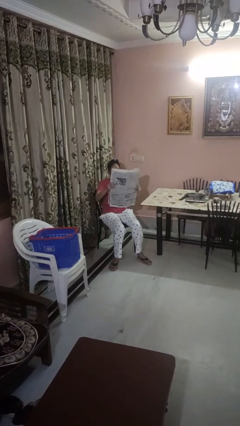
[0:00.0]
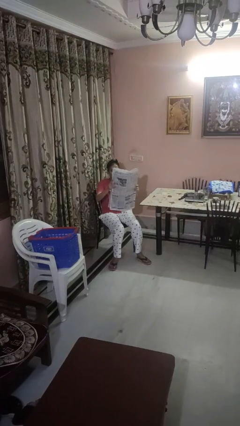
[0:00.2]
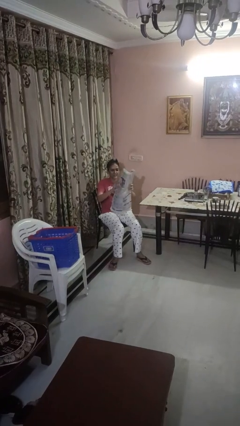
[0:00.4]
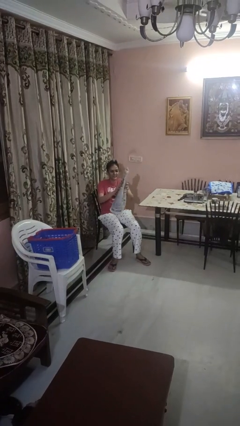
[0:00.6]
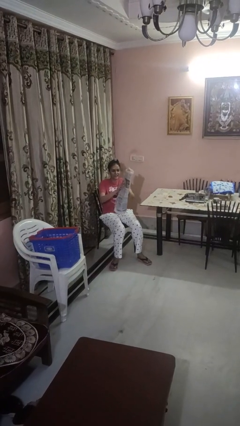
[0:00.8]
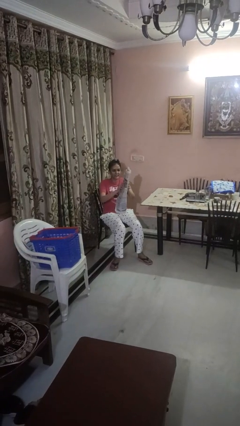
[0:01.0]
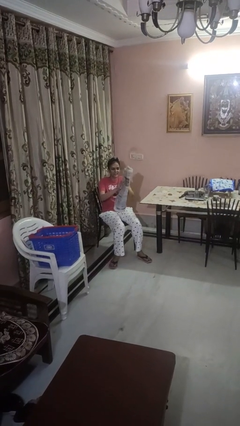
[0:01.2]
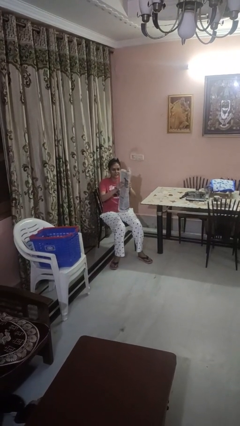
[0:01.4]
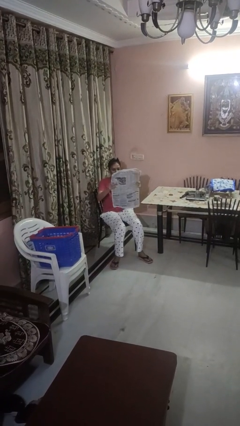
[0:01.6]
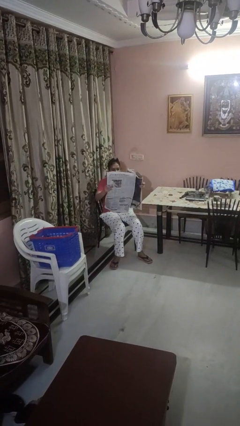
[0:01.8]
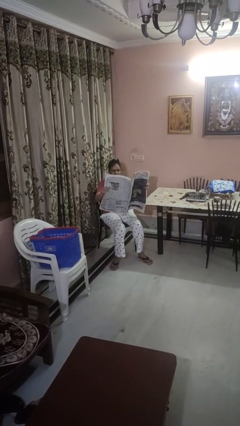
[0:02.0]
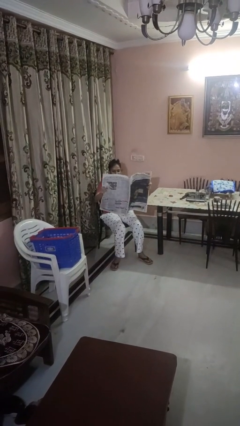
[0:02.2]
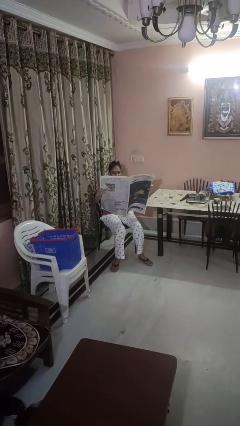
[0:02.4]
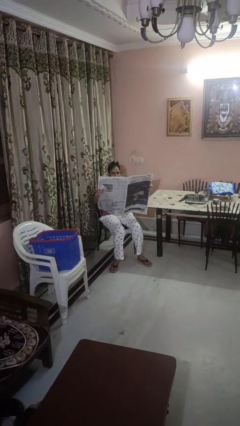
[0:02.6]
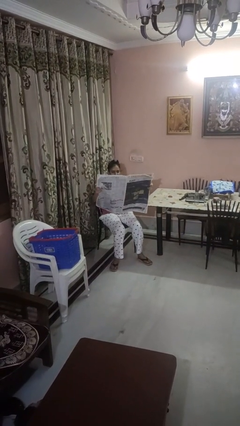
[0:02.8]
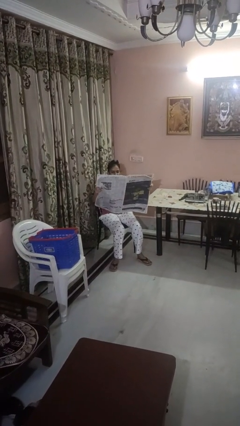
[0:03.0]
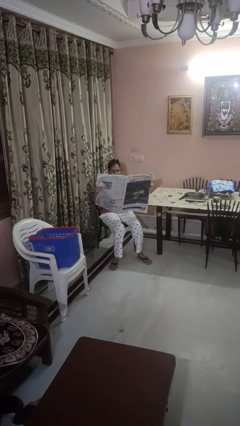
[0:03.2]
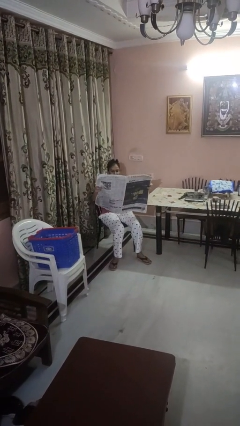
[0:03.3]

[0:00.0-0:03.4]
person reads newspaper

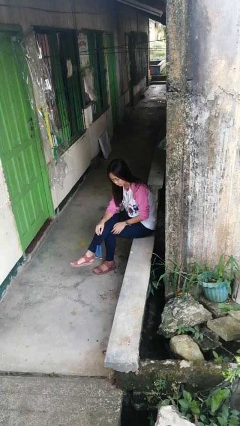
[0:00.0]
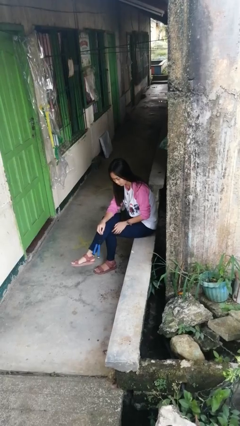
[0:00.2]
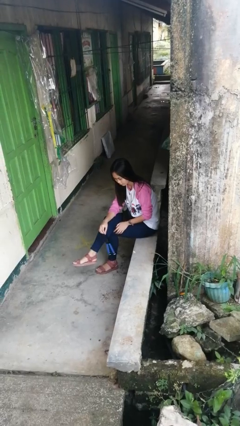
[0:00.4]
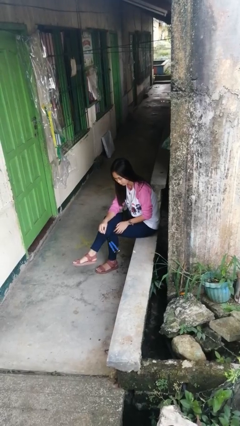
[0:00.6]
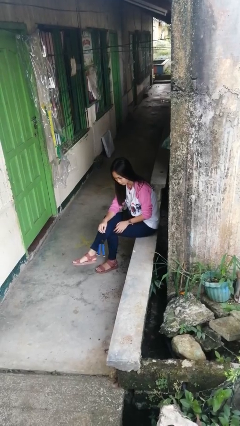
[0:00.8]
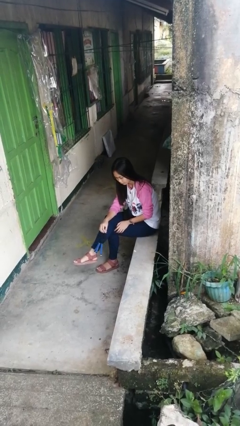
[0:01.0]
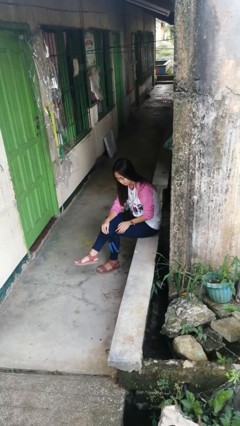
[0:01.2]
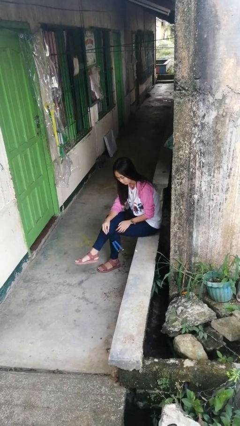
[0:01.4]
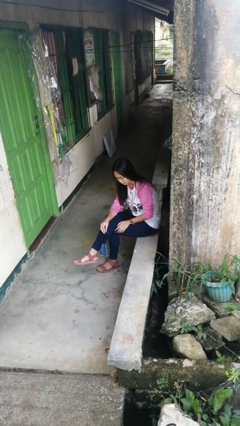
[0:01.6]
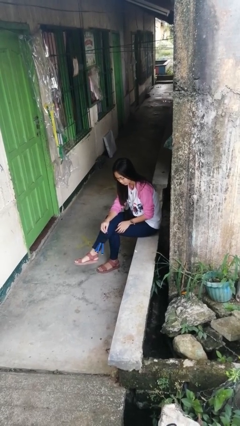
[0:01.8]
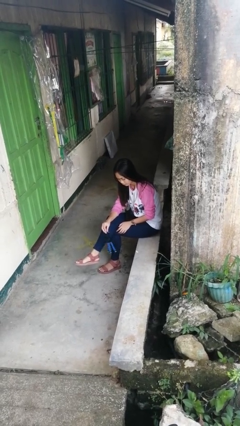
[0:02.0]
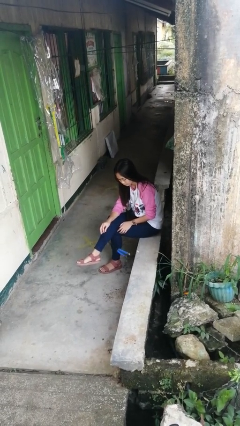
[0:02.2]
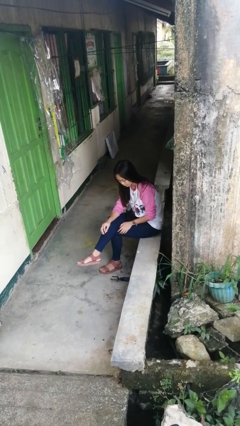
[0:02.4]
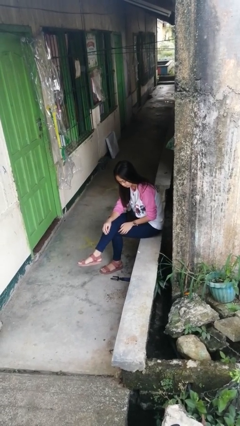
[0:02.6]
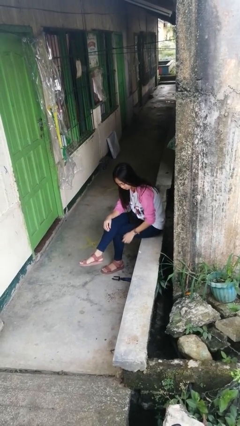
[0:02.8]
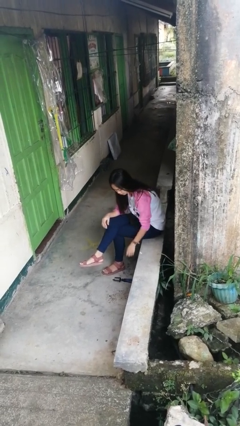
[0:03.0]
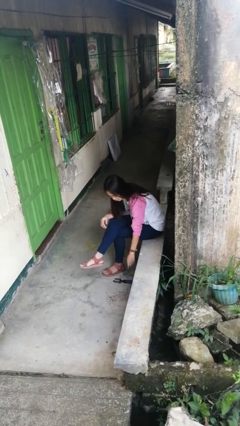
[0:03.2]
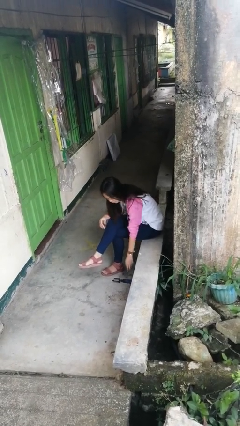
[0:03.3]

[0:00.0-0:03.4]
person drops object

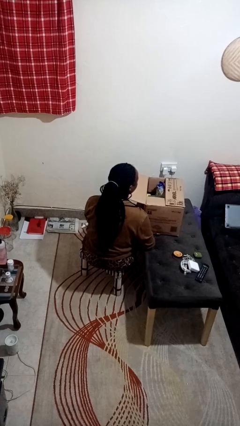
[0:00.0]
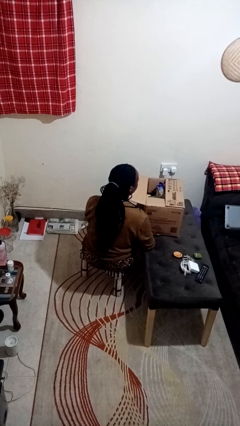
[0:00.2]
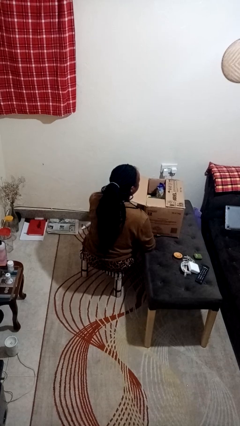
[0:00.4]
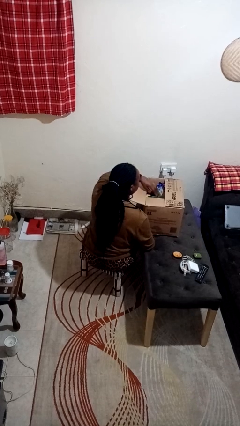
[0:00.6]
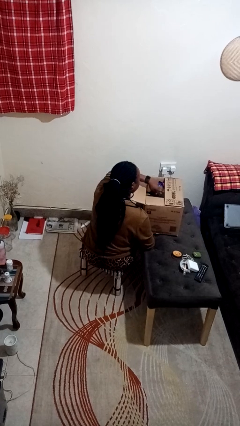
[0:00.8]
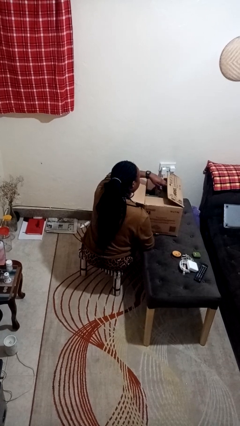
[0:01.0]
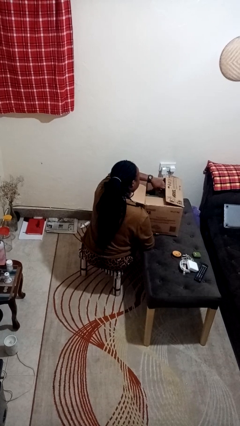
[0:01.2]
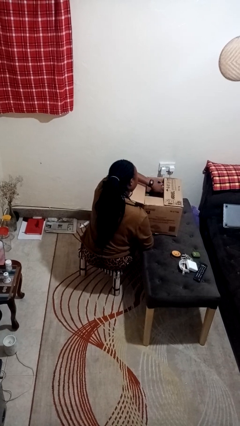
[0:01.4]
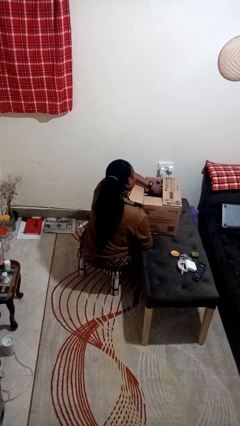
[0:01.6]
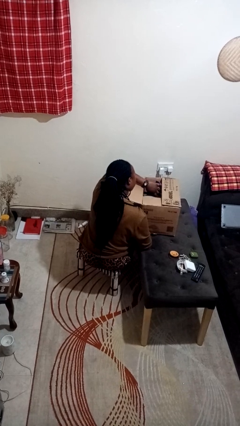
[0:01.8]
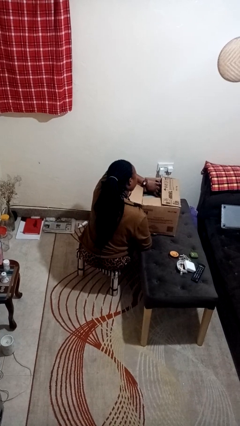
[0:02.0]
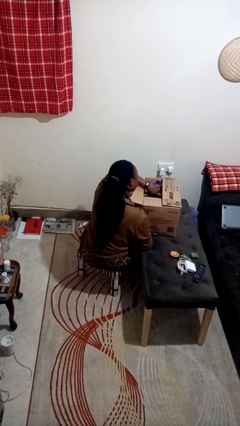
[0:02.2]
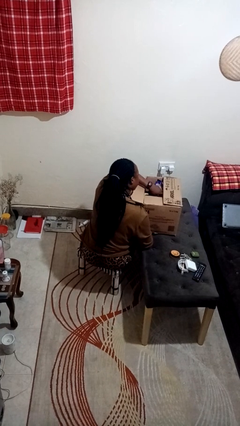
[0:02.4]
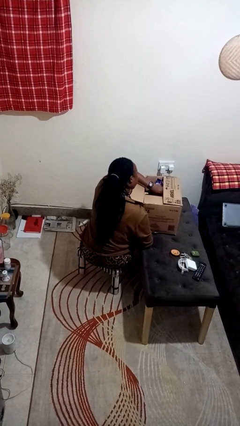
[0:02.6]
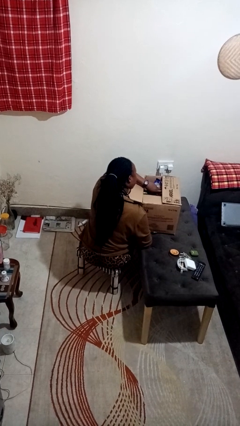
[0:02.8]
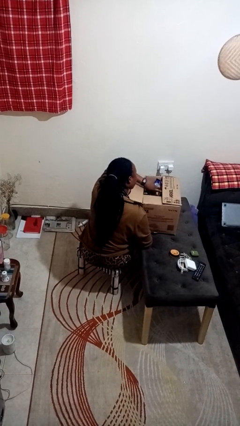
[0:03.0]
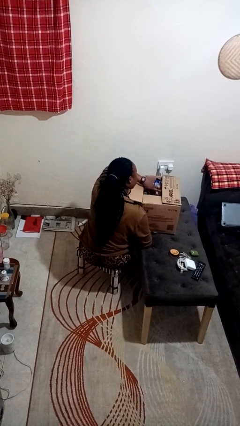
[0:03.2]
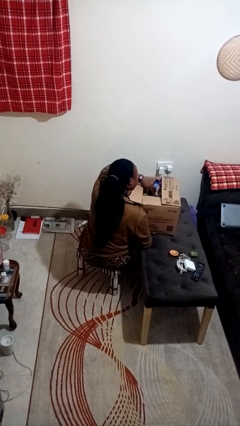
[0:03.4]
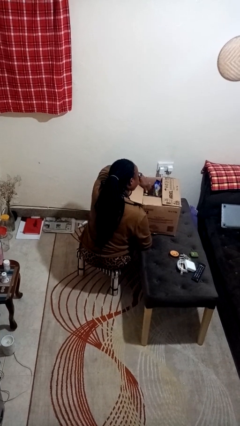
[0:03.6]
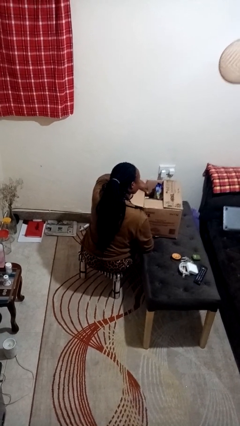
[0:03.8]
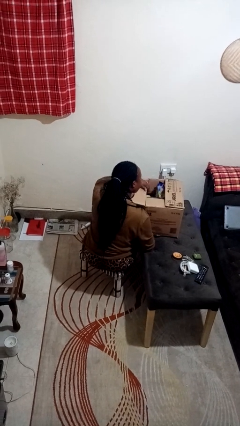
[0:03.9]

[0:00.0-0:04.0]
person searches in box

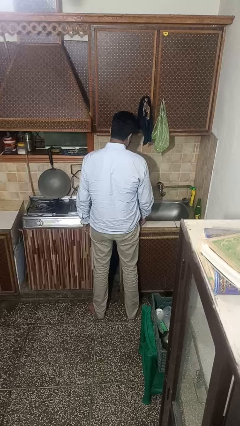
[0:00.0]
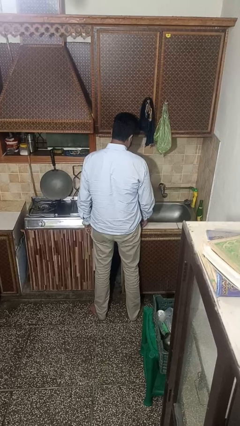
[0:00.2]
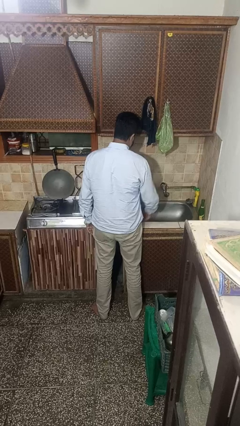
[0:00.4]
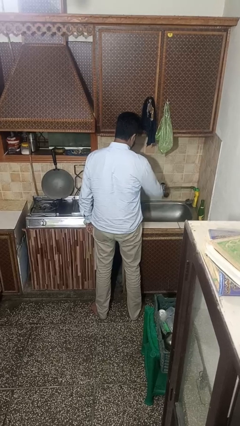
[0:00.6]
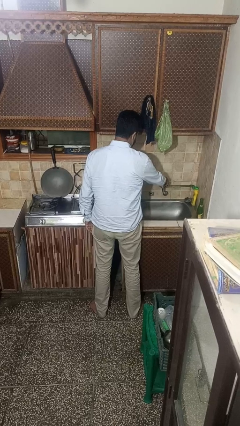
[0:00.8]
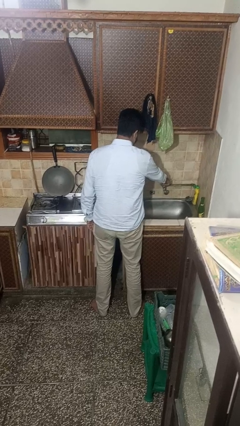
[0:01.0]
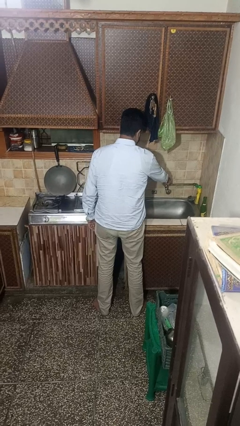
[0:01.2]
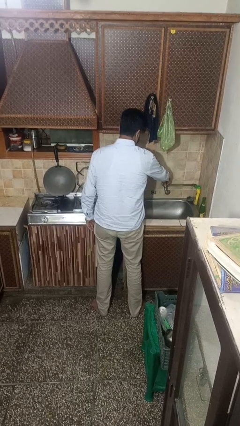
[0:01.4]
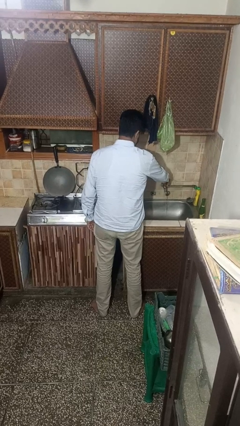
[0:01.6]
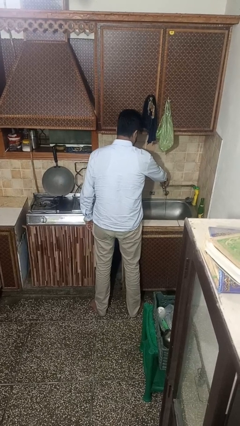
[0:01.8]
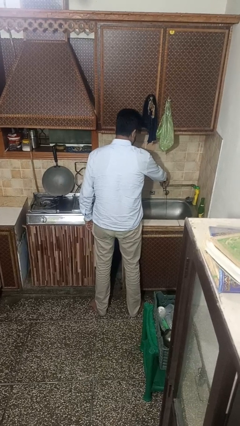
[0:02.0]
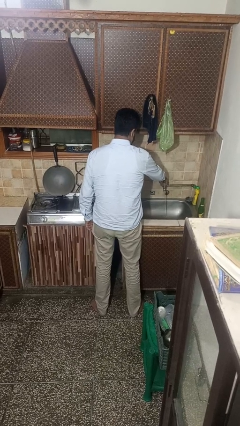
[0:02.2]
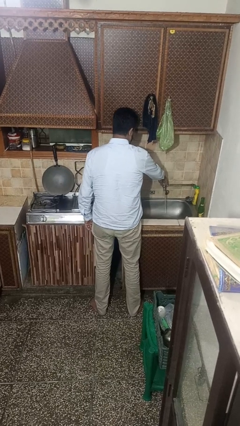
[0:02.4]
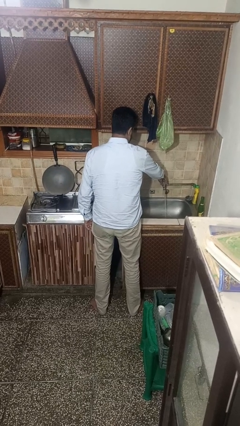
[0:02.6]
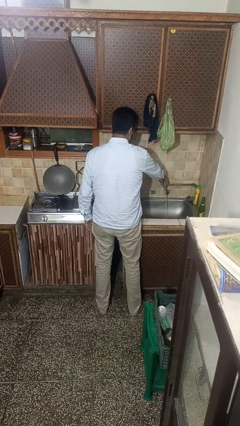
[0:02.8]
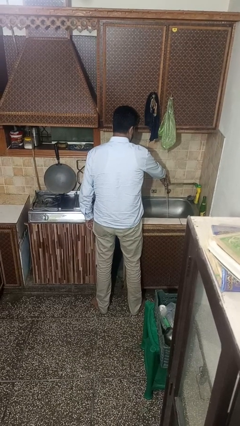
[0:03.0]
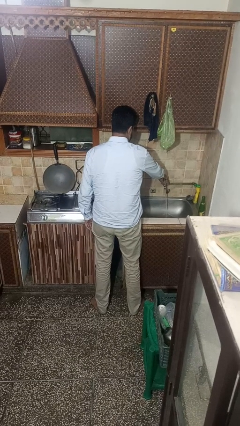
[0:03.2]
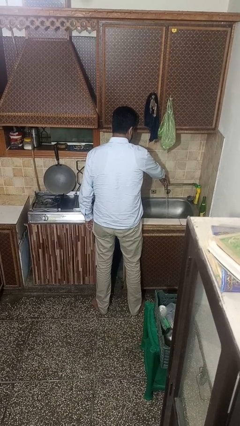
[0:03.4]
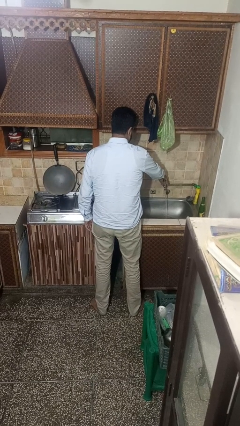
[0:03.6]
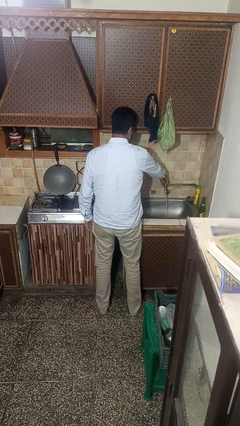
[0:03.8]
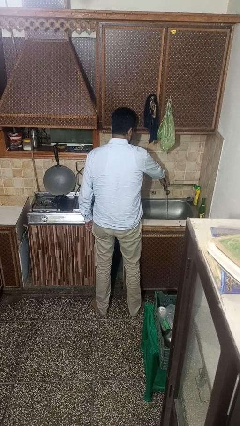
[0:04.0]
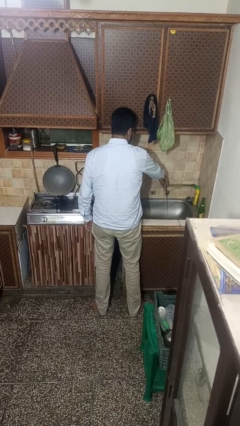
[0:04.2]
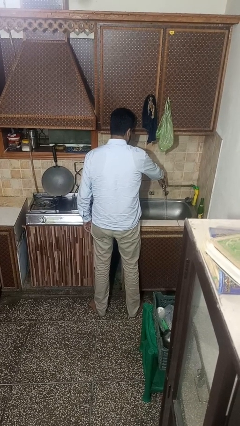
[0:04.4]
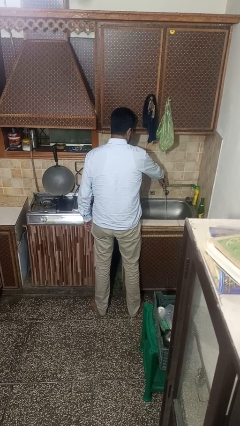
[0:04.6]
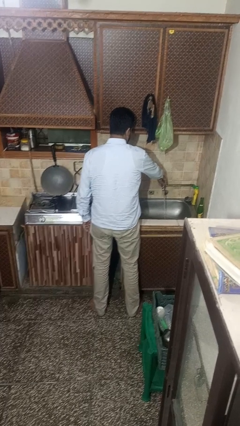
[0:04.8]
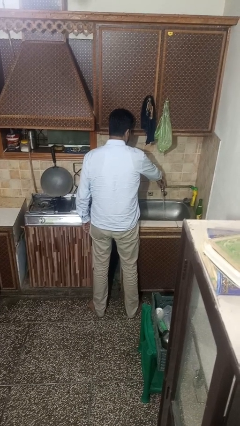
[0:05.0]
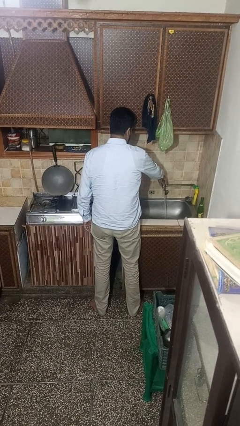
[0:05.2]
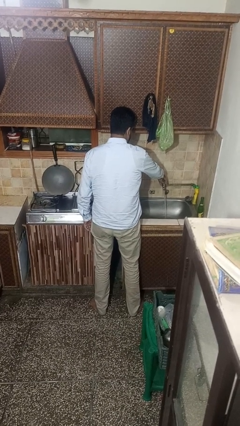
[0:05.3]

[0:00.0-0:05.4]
person turns on faucet

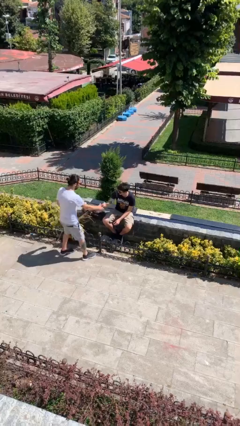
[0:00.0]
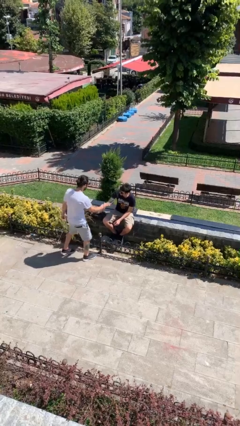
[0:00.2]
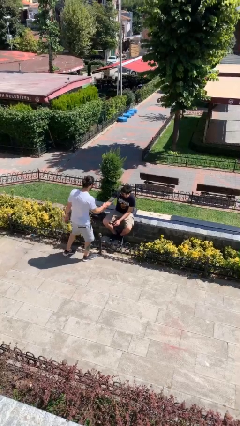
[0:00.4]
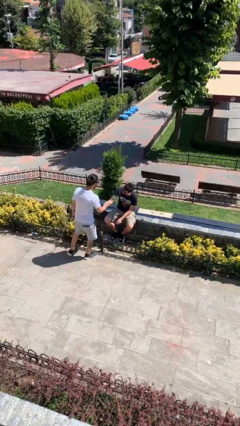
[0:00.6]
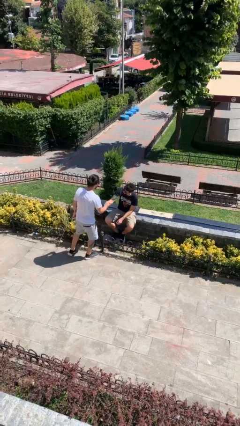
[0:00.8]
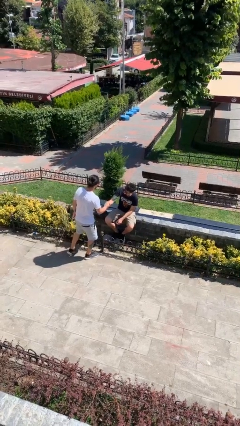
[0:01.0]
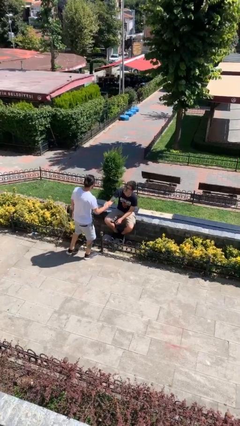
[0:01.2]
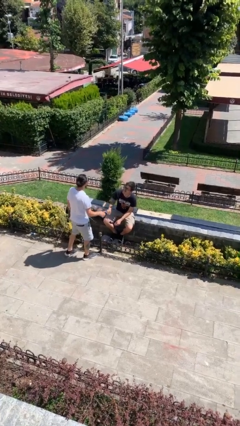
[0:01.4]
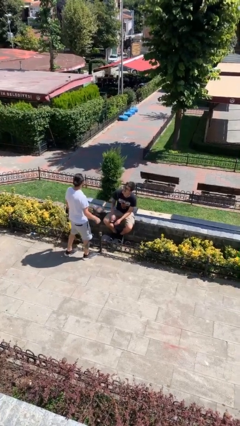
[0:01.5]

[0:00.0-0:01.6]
person shakes hand
